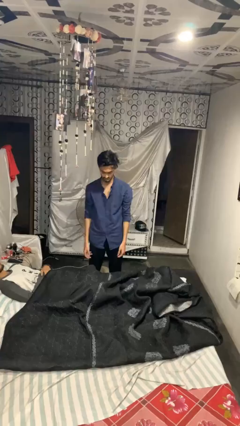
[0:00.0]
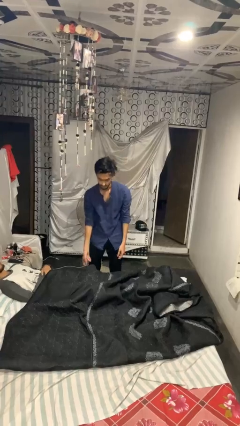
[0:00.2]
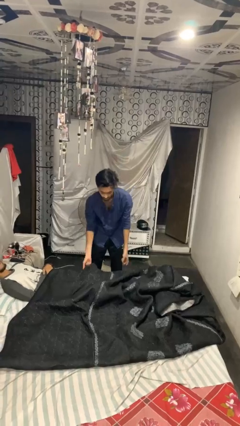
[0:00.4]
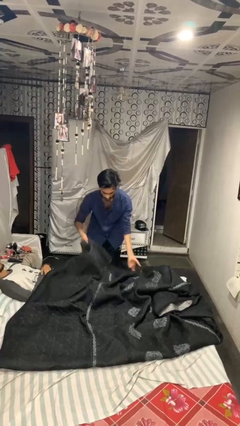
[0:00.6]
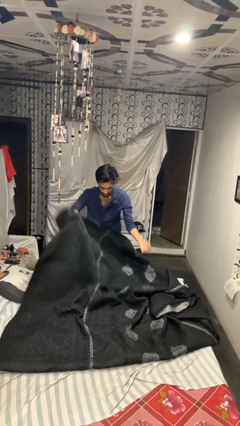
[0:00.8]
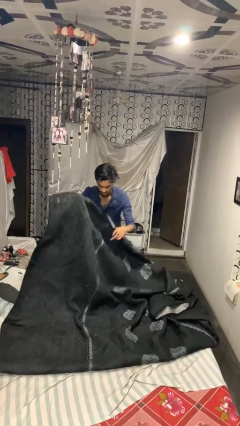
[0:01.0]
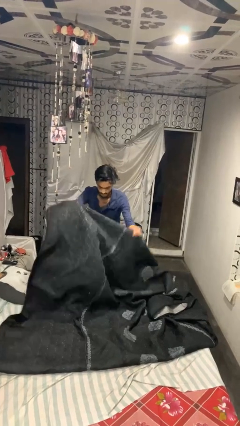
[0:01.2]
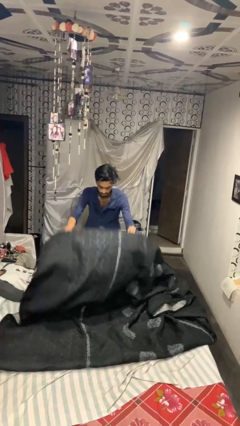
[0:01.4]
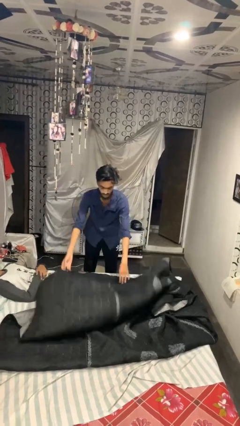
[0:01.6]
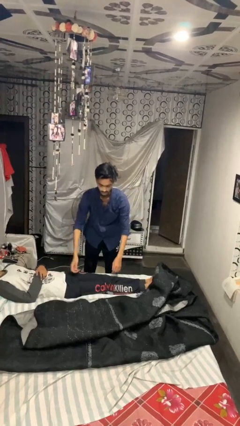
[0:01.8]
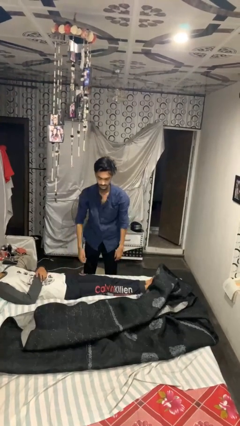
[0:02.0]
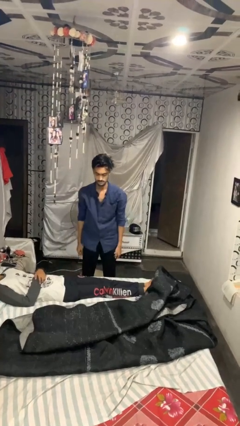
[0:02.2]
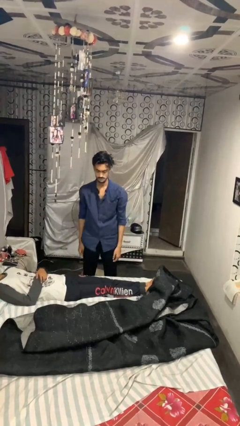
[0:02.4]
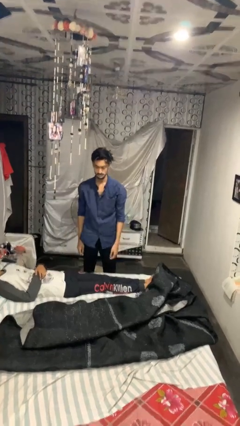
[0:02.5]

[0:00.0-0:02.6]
person uncovers friend with blanket

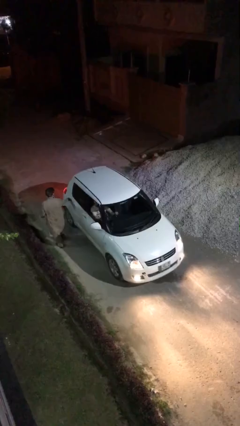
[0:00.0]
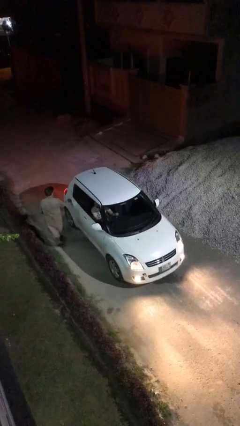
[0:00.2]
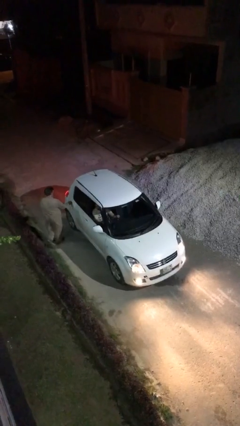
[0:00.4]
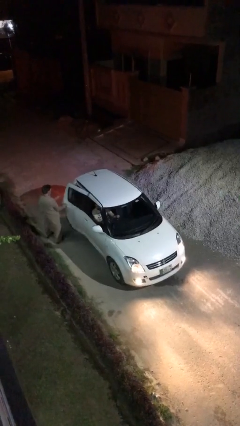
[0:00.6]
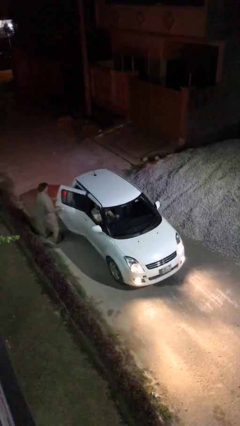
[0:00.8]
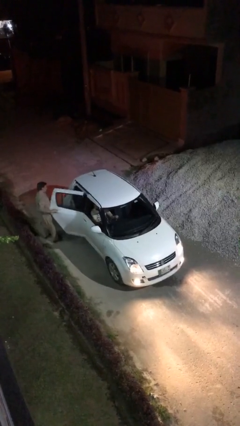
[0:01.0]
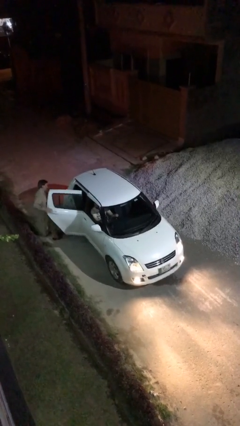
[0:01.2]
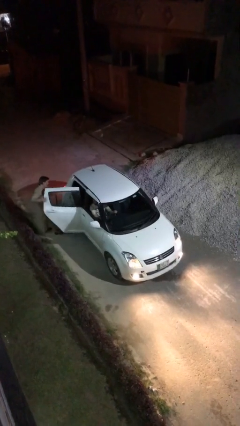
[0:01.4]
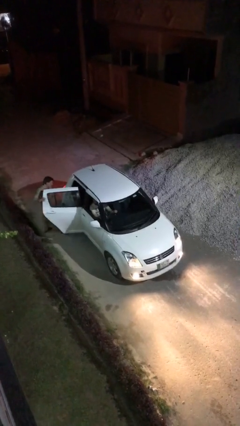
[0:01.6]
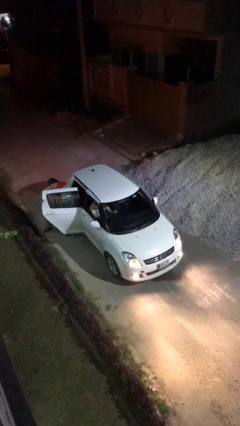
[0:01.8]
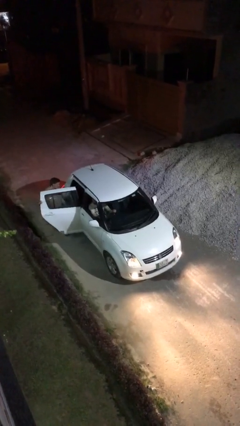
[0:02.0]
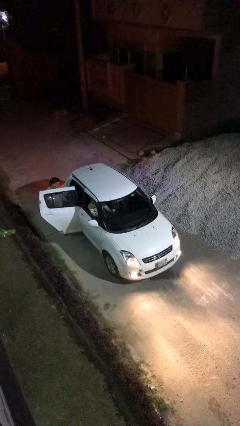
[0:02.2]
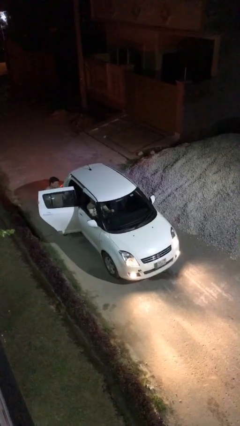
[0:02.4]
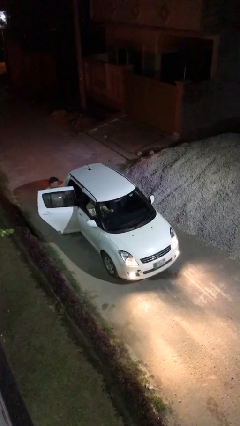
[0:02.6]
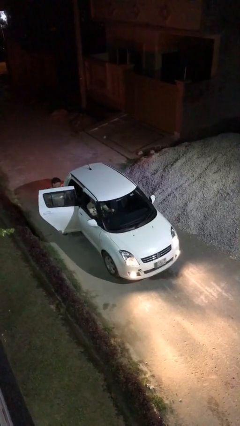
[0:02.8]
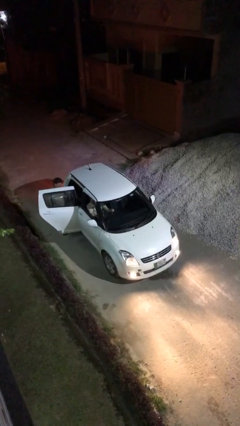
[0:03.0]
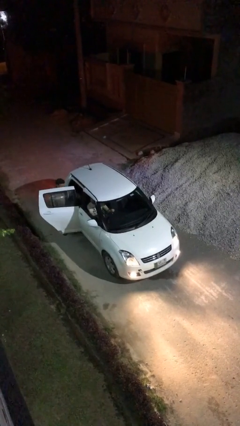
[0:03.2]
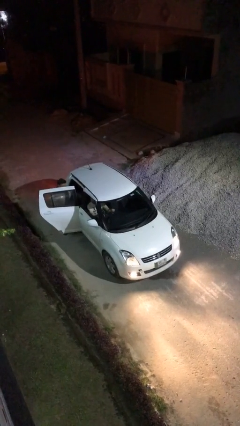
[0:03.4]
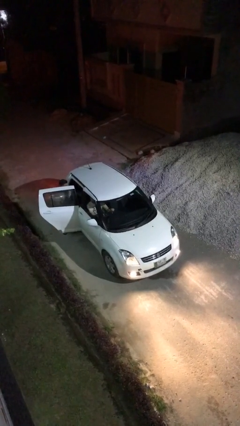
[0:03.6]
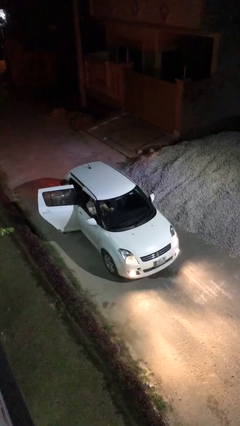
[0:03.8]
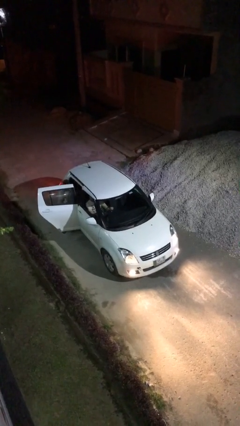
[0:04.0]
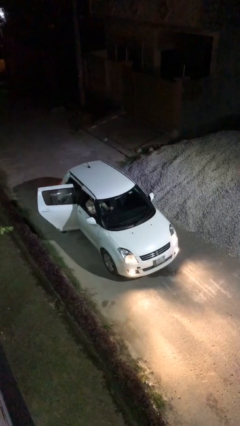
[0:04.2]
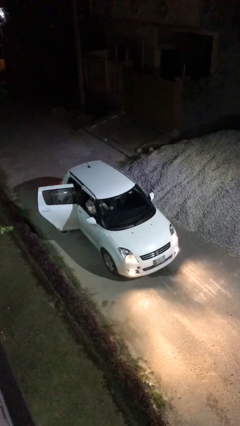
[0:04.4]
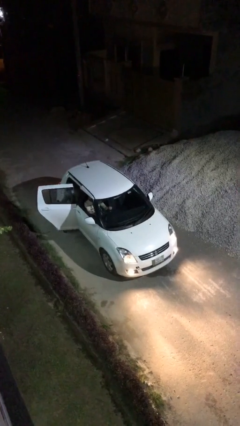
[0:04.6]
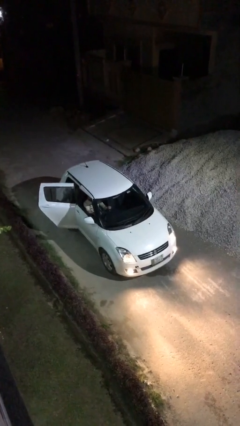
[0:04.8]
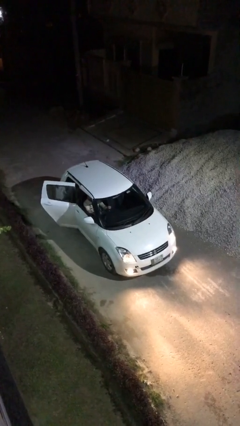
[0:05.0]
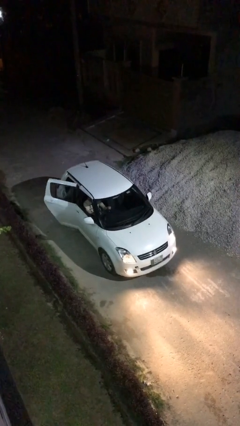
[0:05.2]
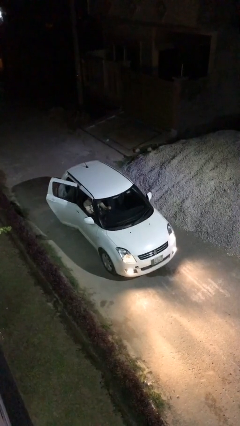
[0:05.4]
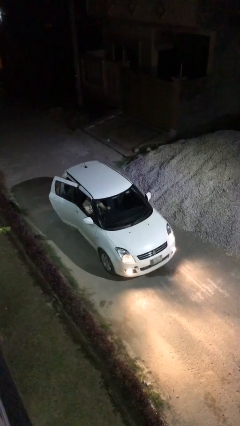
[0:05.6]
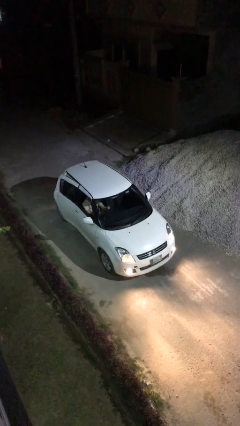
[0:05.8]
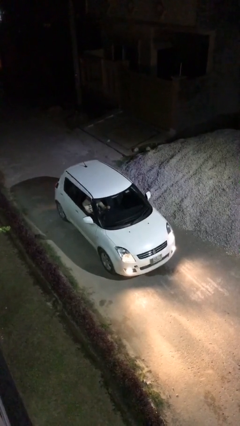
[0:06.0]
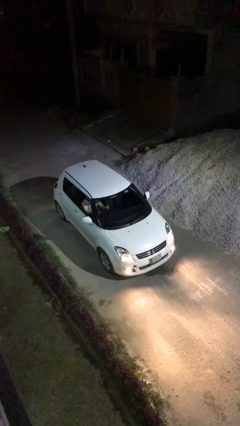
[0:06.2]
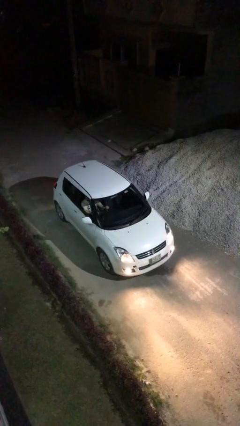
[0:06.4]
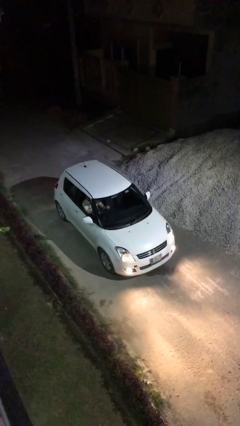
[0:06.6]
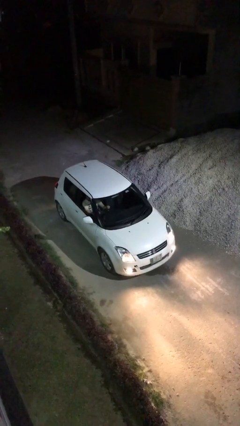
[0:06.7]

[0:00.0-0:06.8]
car picks up person

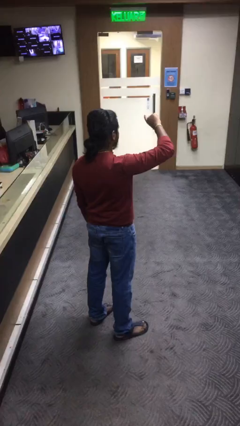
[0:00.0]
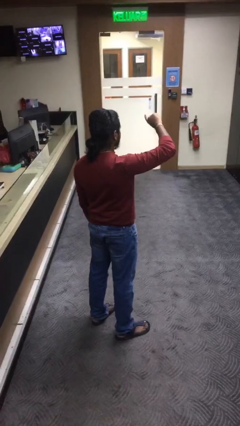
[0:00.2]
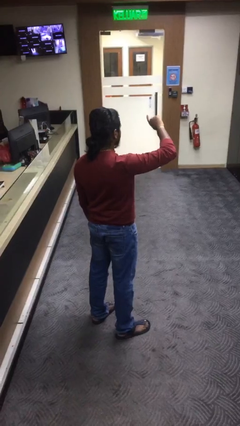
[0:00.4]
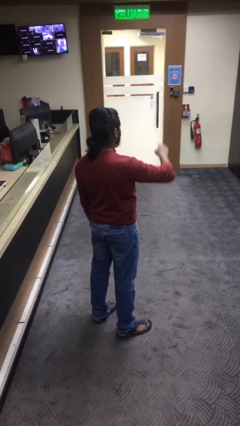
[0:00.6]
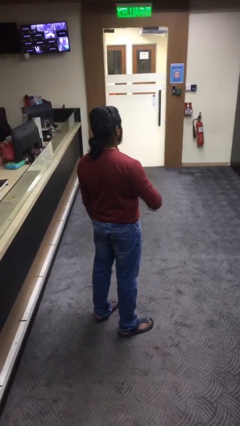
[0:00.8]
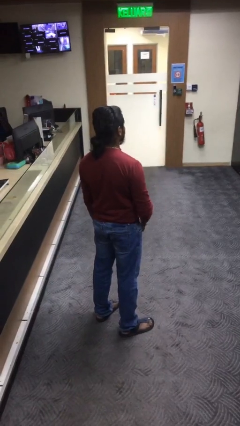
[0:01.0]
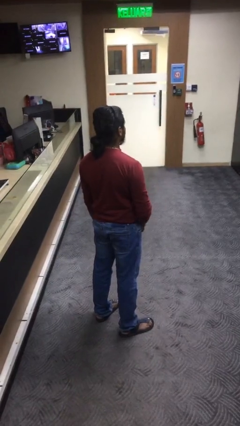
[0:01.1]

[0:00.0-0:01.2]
person gestures swipe down

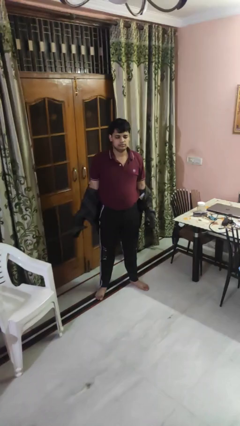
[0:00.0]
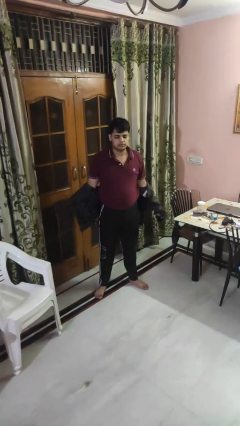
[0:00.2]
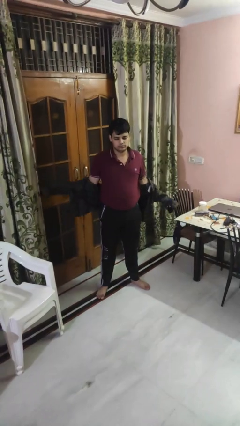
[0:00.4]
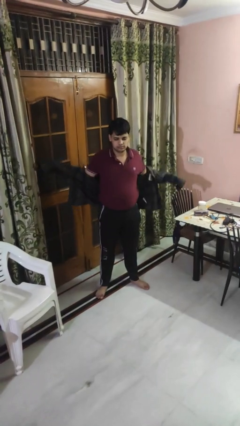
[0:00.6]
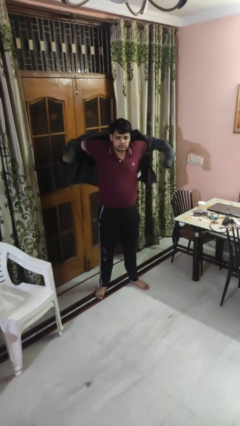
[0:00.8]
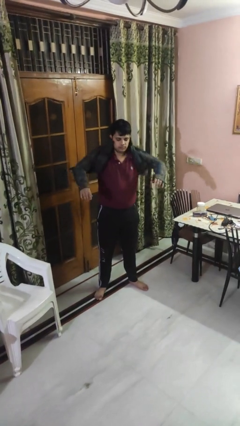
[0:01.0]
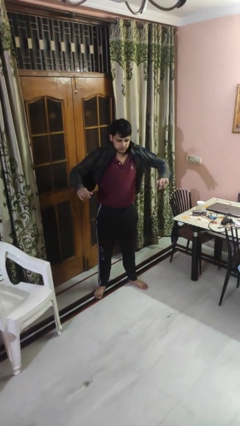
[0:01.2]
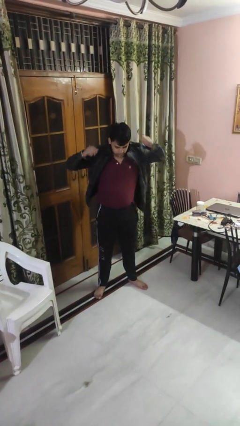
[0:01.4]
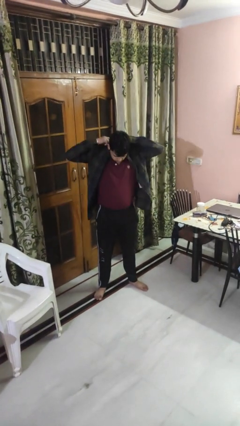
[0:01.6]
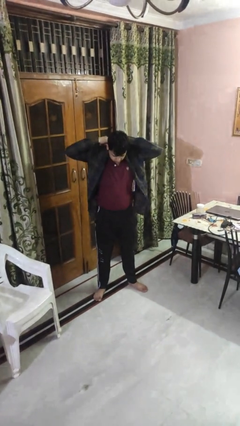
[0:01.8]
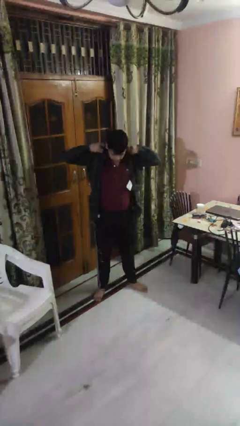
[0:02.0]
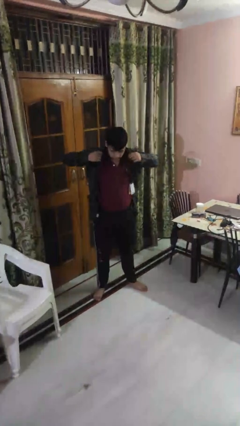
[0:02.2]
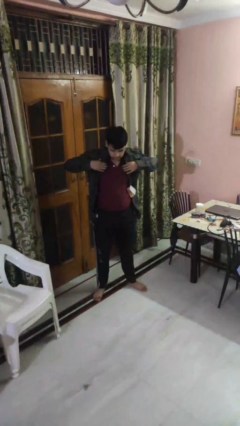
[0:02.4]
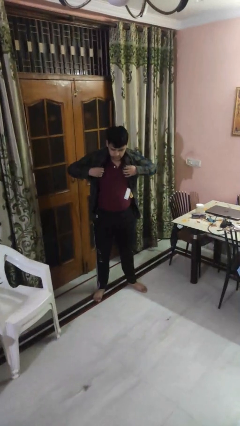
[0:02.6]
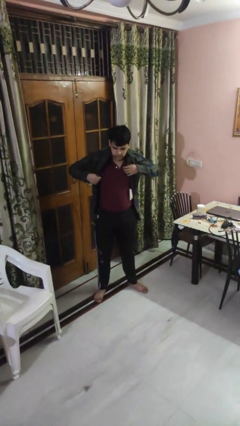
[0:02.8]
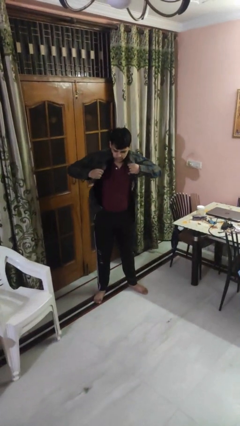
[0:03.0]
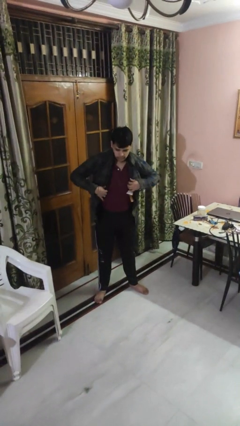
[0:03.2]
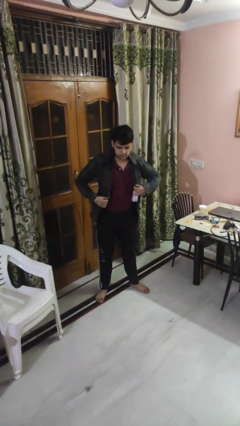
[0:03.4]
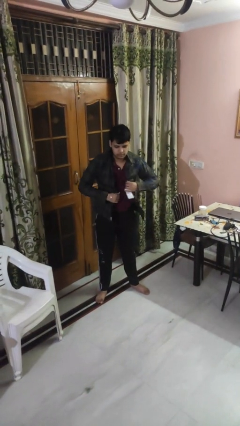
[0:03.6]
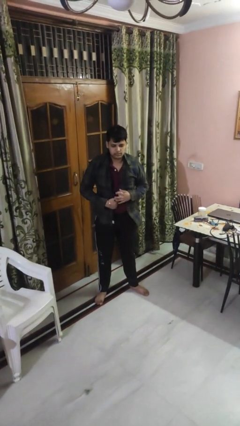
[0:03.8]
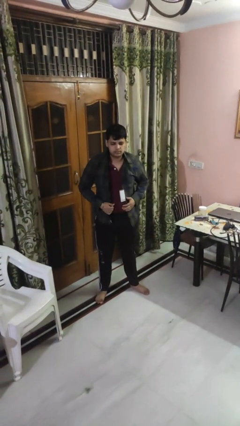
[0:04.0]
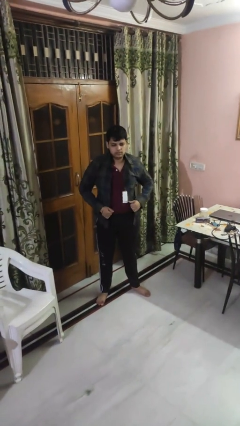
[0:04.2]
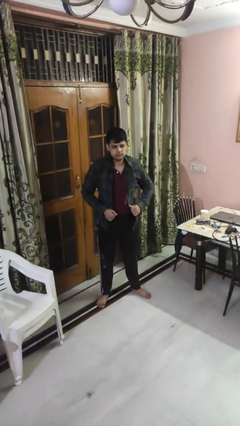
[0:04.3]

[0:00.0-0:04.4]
person puts on shirt

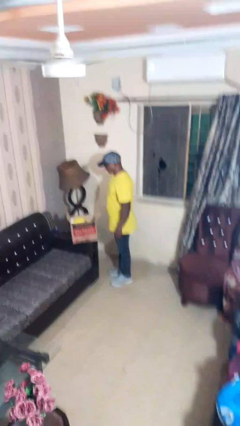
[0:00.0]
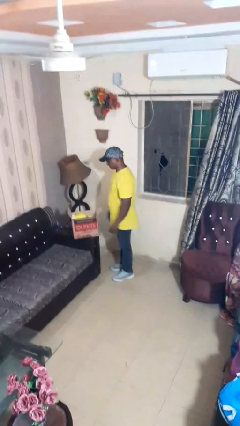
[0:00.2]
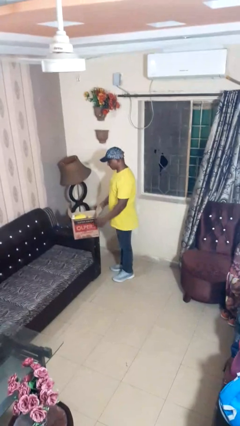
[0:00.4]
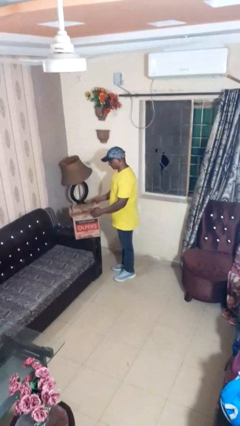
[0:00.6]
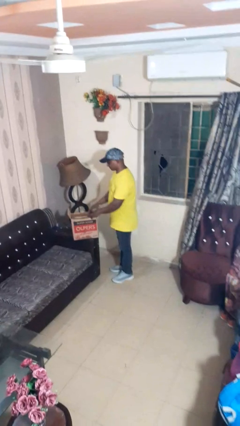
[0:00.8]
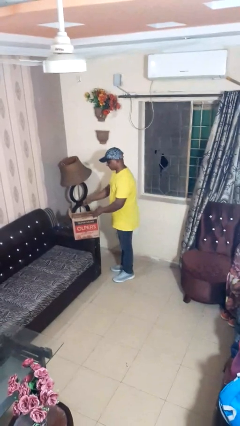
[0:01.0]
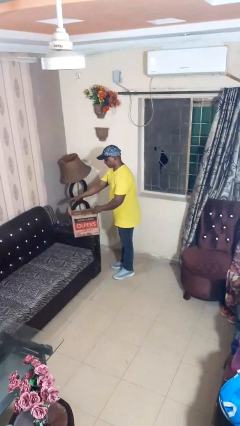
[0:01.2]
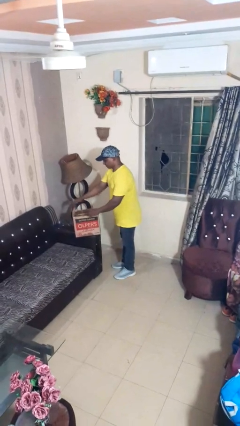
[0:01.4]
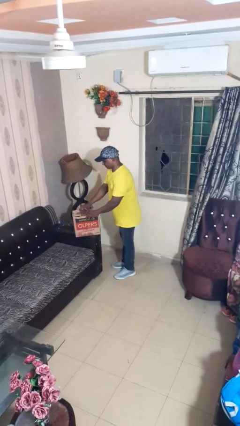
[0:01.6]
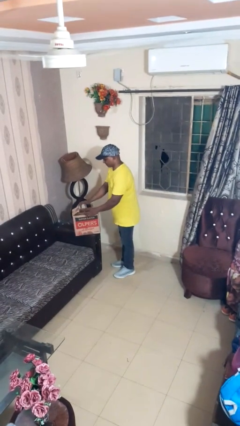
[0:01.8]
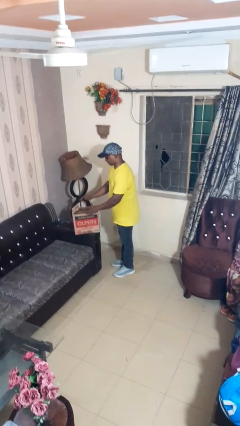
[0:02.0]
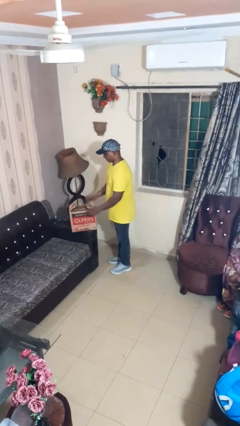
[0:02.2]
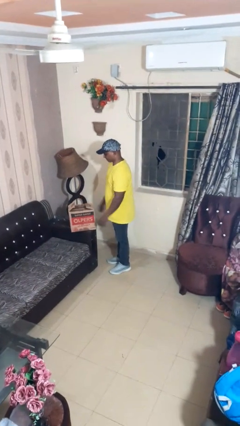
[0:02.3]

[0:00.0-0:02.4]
person closes box
